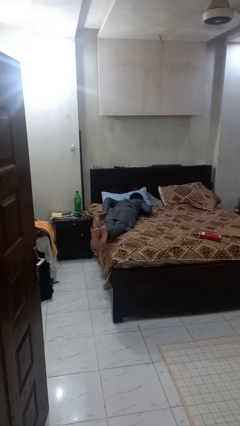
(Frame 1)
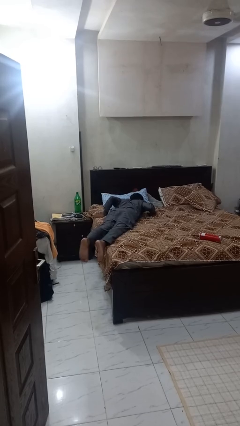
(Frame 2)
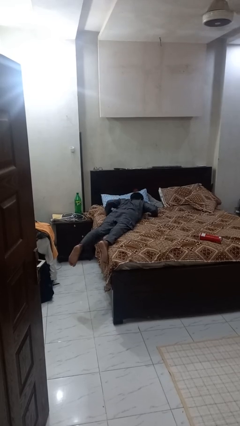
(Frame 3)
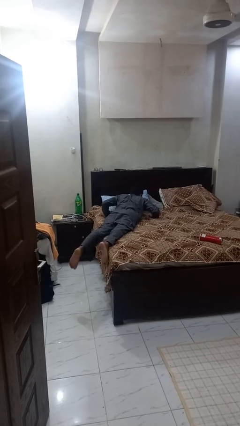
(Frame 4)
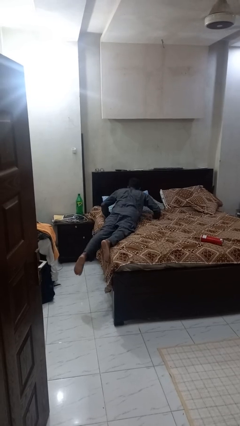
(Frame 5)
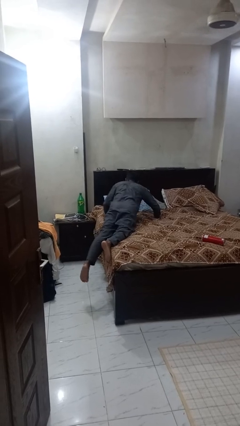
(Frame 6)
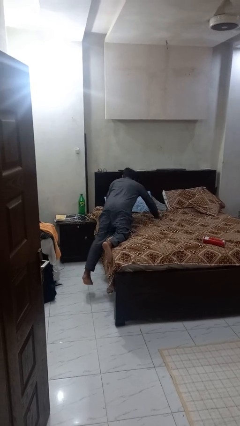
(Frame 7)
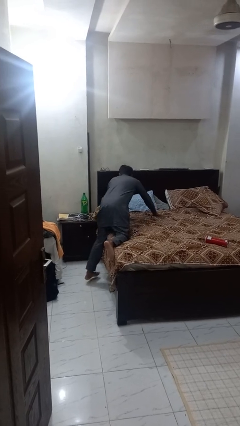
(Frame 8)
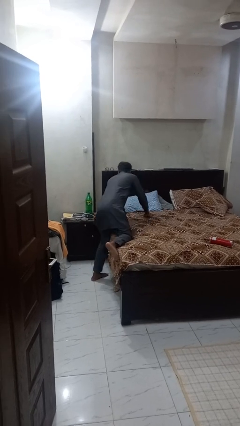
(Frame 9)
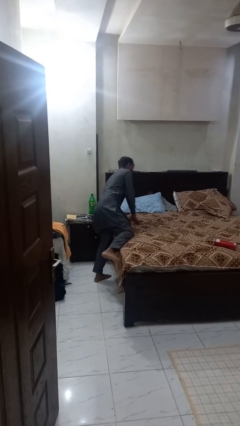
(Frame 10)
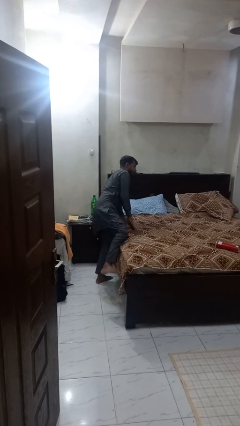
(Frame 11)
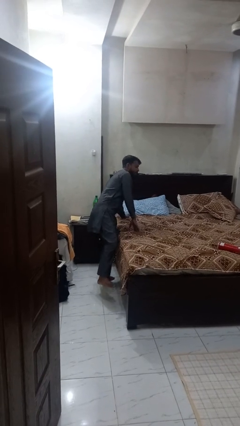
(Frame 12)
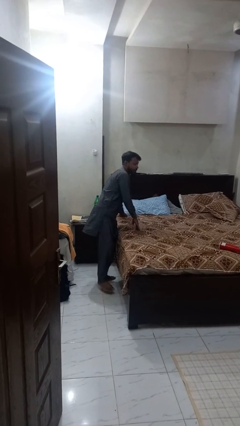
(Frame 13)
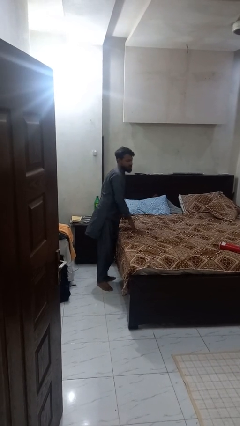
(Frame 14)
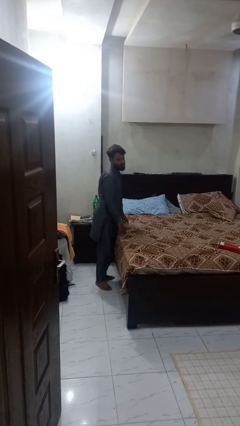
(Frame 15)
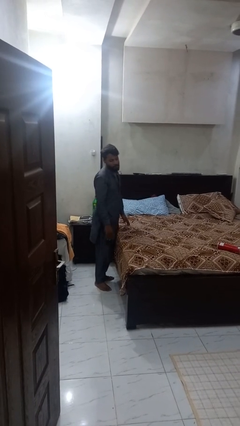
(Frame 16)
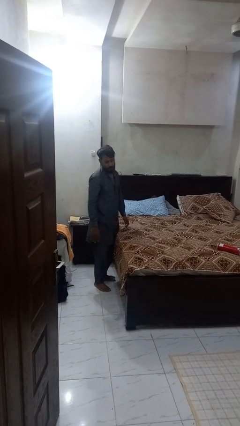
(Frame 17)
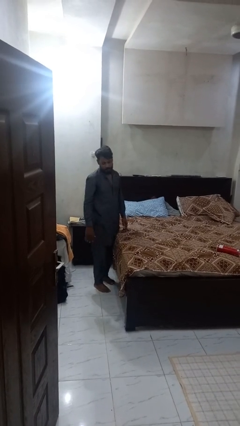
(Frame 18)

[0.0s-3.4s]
person stands up

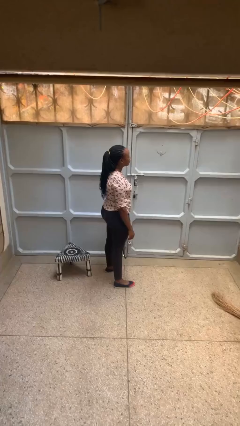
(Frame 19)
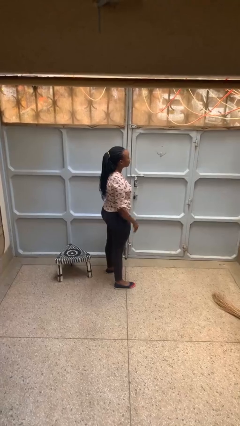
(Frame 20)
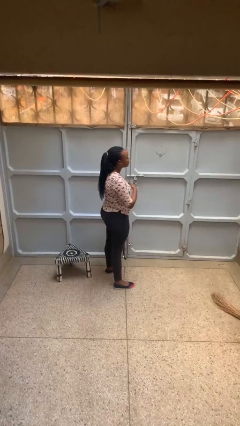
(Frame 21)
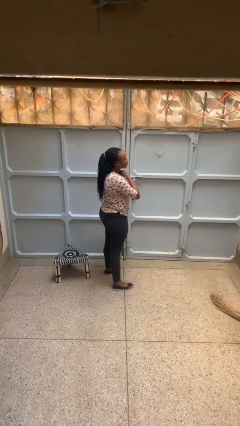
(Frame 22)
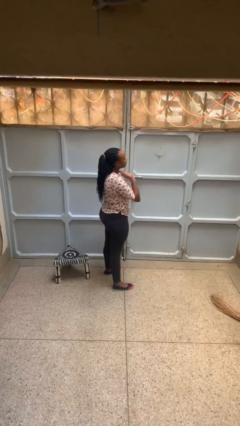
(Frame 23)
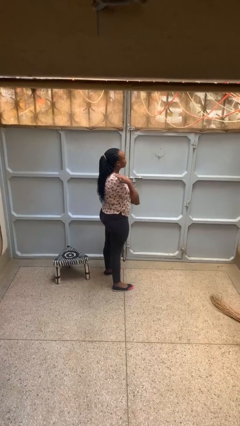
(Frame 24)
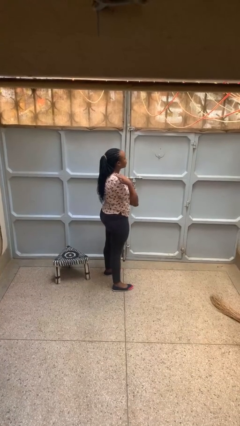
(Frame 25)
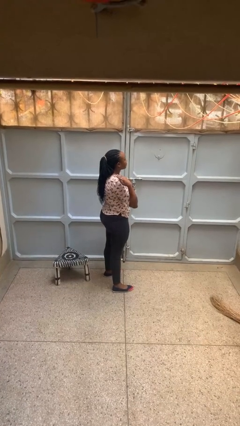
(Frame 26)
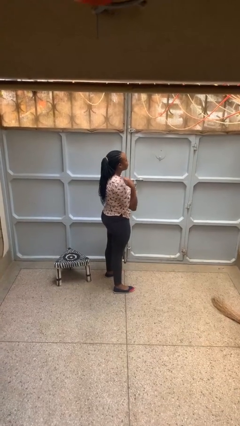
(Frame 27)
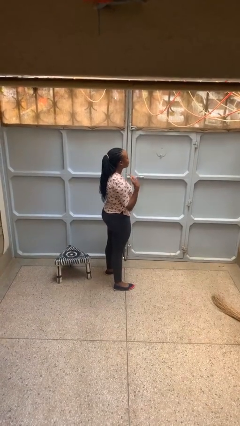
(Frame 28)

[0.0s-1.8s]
person gestures cut

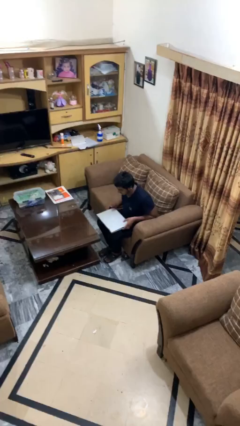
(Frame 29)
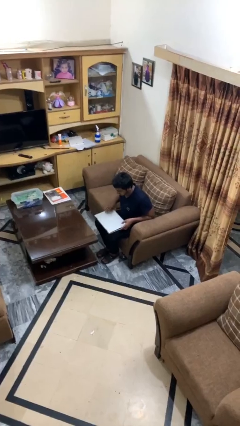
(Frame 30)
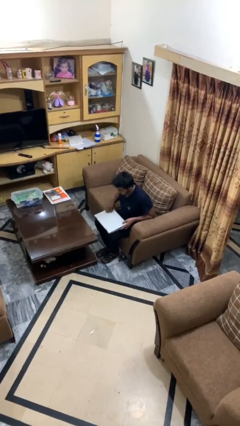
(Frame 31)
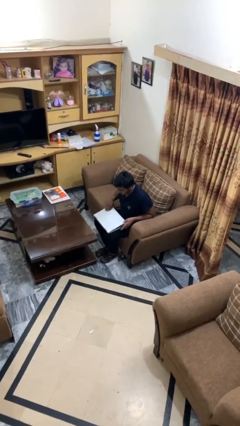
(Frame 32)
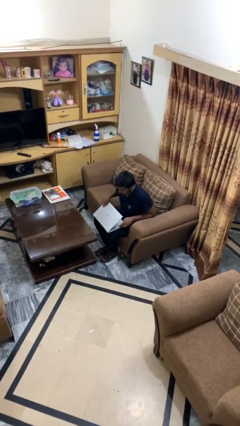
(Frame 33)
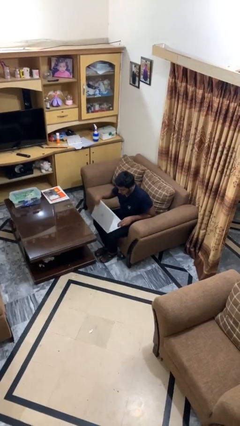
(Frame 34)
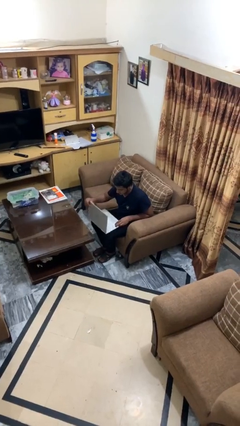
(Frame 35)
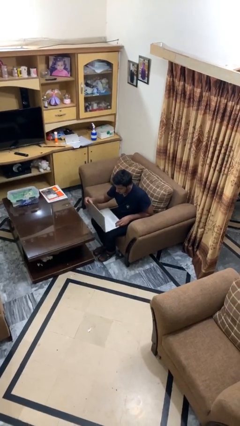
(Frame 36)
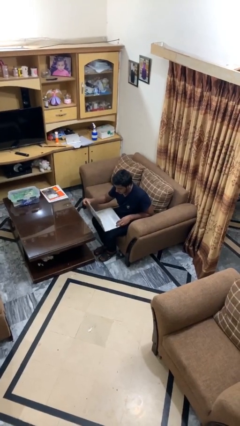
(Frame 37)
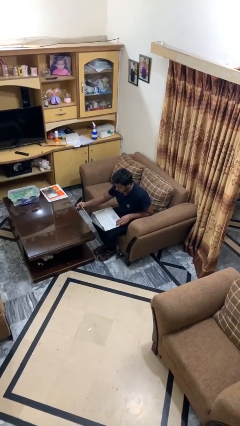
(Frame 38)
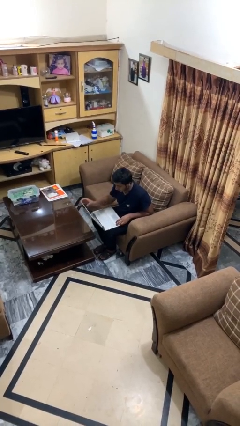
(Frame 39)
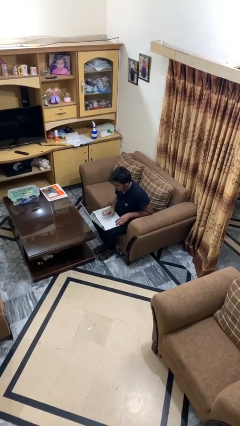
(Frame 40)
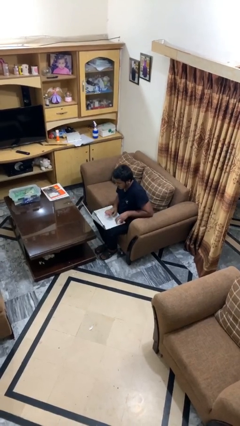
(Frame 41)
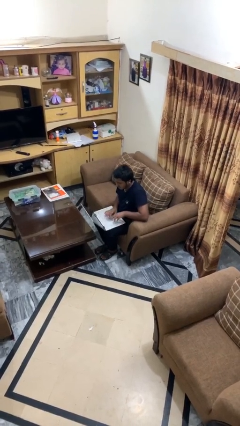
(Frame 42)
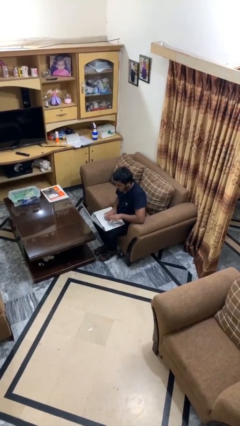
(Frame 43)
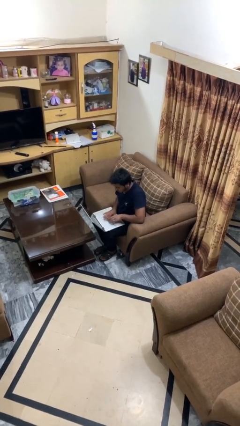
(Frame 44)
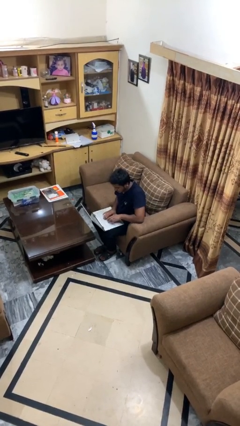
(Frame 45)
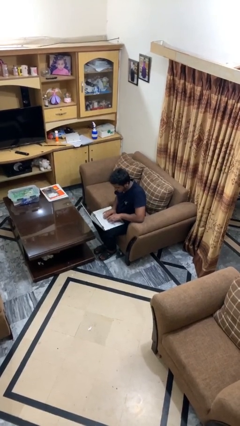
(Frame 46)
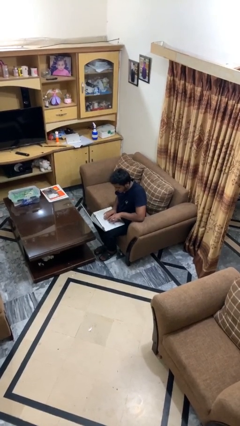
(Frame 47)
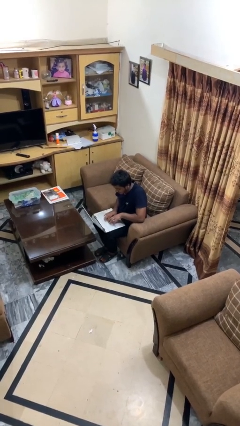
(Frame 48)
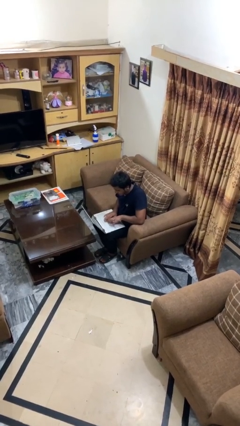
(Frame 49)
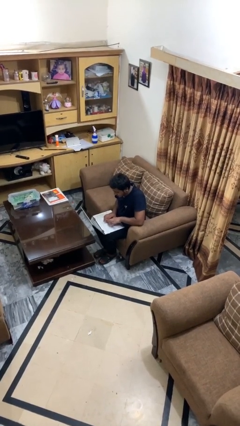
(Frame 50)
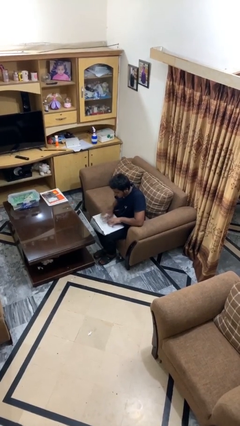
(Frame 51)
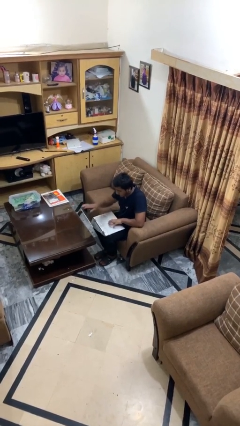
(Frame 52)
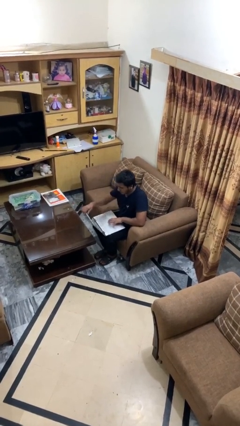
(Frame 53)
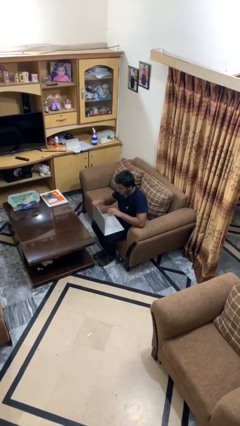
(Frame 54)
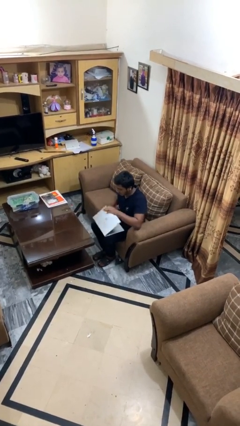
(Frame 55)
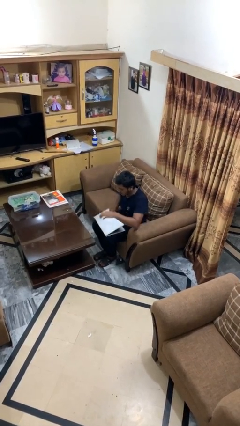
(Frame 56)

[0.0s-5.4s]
person interacts with laptop

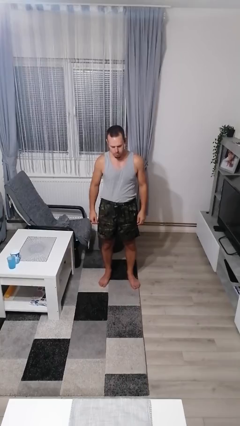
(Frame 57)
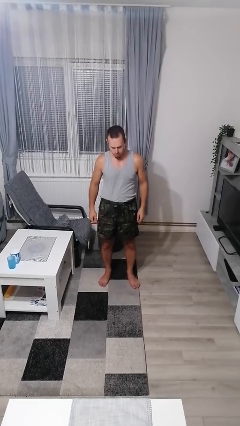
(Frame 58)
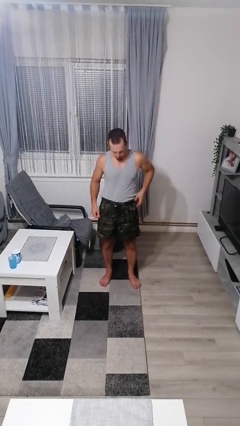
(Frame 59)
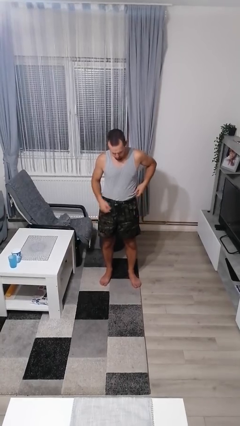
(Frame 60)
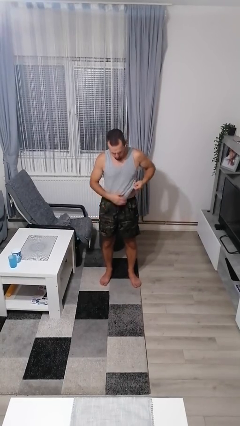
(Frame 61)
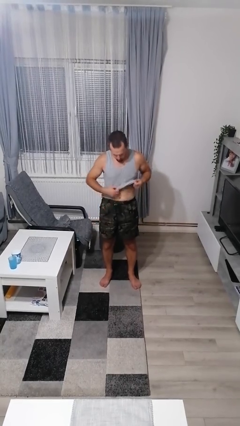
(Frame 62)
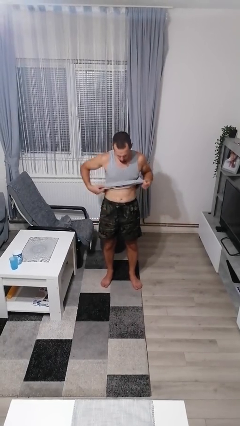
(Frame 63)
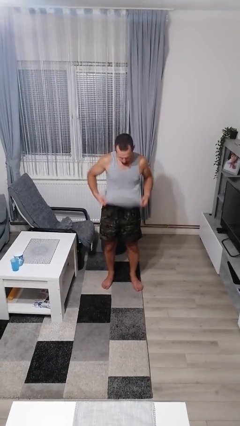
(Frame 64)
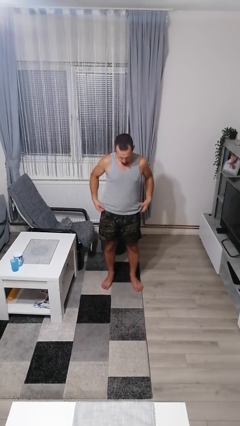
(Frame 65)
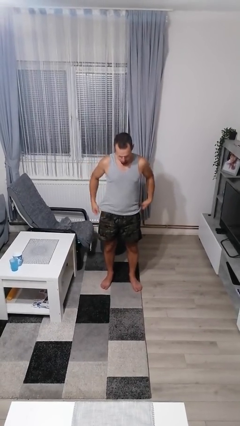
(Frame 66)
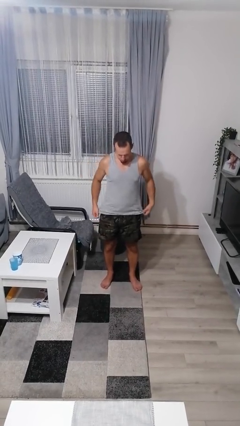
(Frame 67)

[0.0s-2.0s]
person untucks shirt

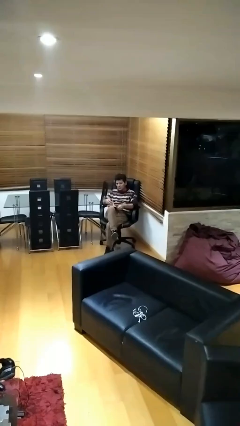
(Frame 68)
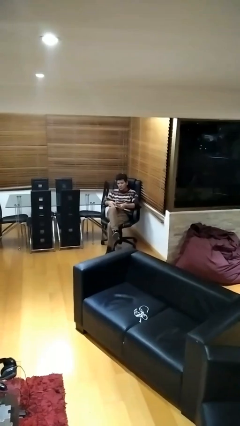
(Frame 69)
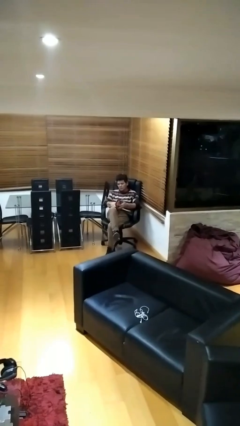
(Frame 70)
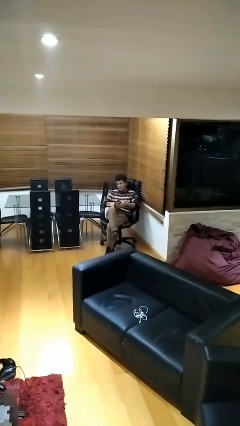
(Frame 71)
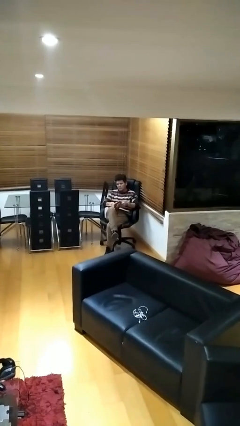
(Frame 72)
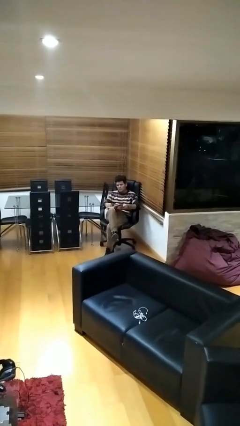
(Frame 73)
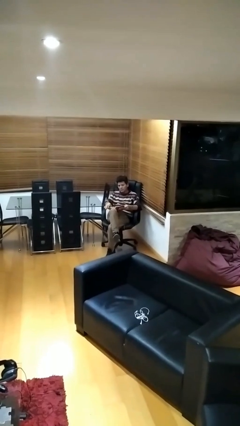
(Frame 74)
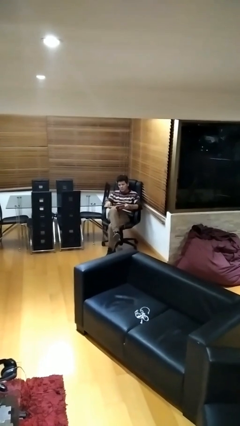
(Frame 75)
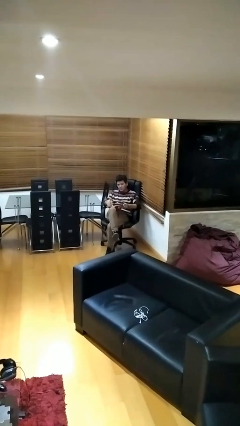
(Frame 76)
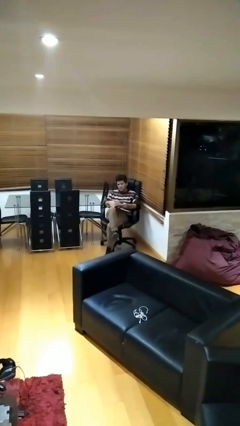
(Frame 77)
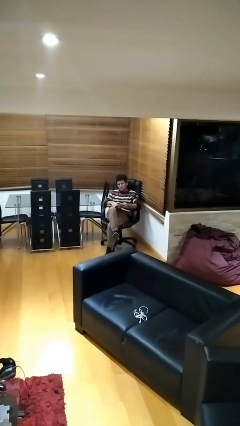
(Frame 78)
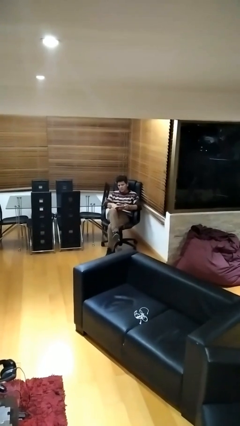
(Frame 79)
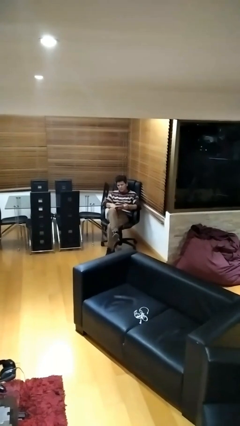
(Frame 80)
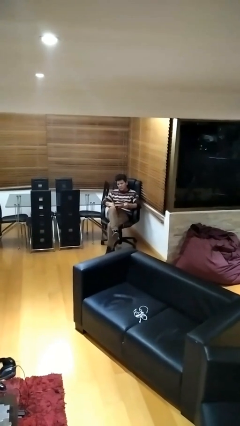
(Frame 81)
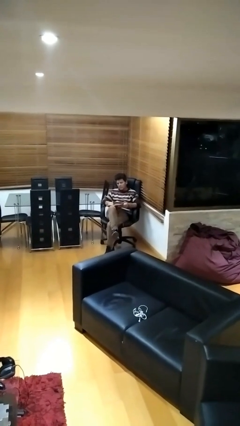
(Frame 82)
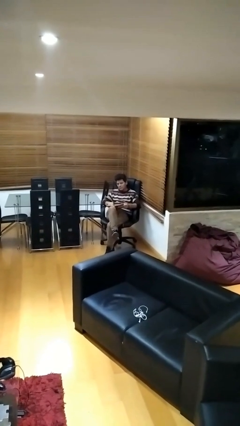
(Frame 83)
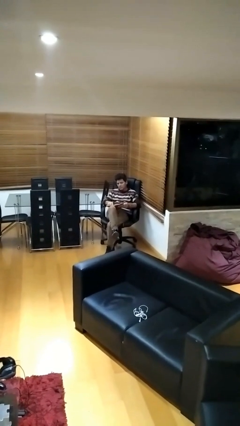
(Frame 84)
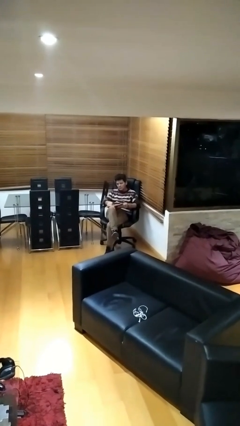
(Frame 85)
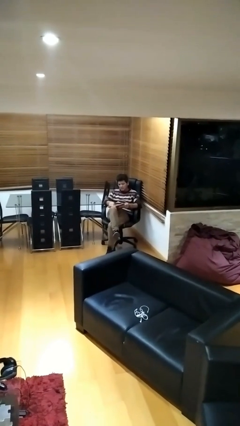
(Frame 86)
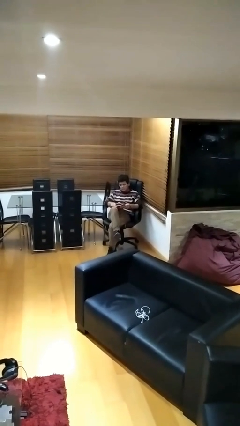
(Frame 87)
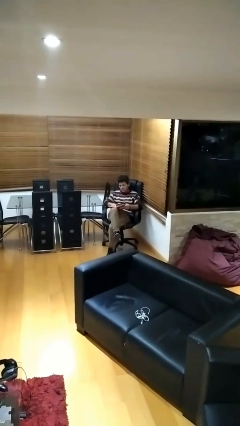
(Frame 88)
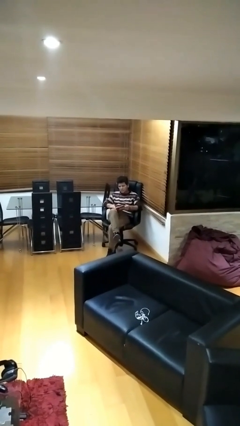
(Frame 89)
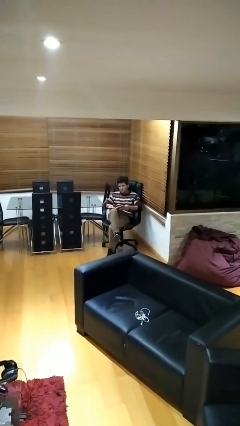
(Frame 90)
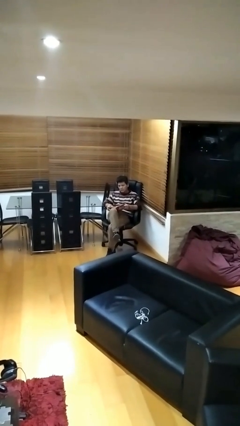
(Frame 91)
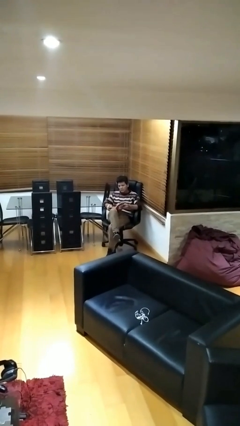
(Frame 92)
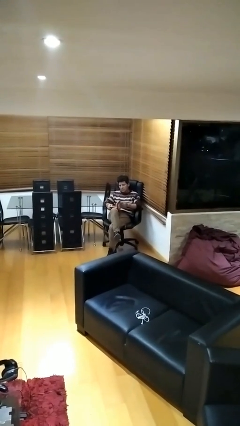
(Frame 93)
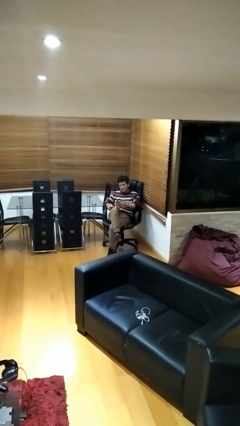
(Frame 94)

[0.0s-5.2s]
person reads document
